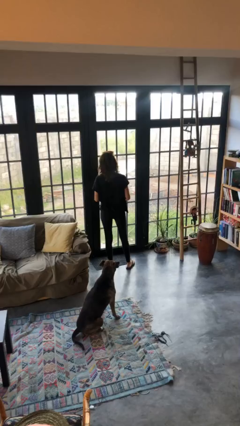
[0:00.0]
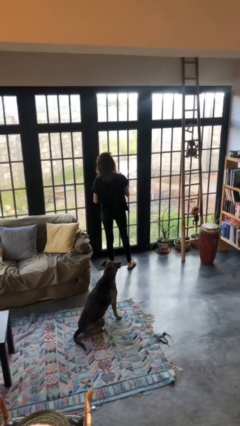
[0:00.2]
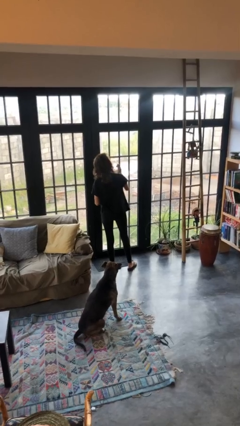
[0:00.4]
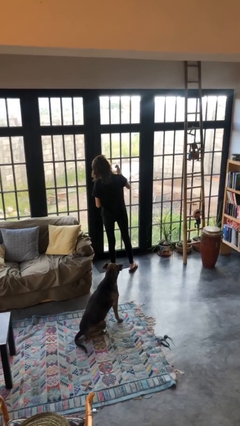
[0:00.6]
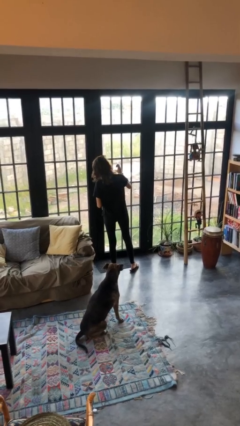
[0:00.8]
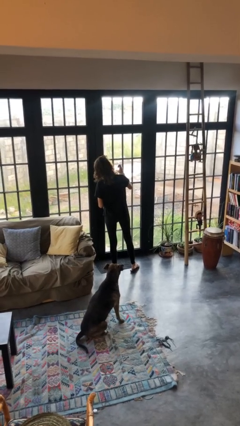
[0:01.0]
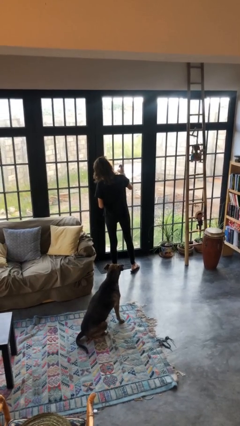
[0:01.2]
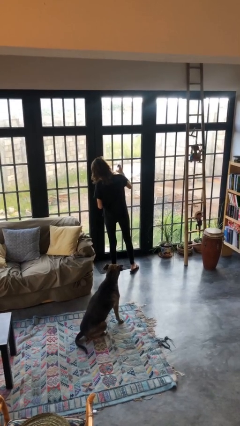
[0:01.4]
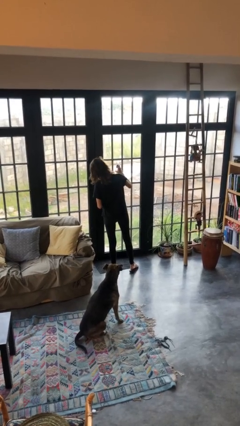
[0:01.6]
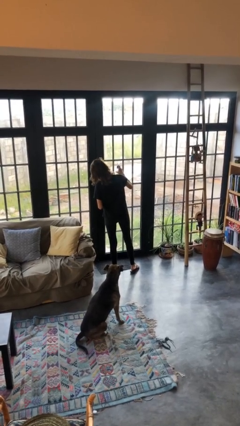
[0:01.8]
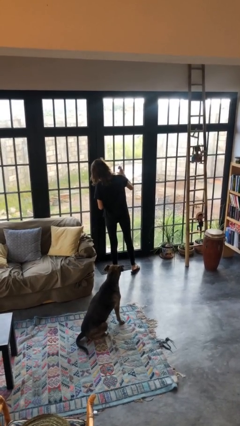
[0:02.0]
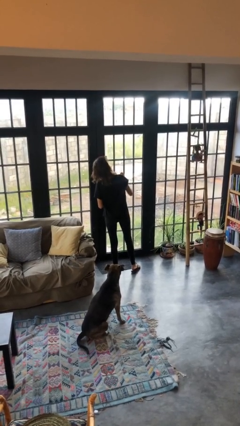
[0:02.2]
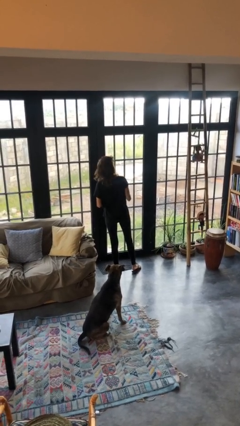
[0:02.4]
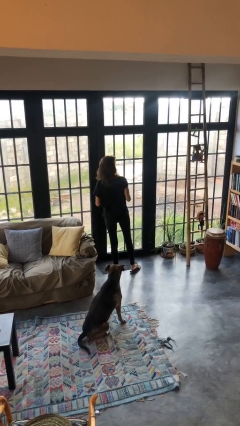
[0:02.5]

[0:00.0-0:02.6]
person sprays from bottle

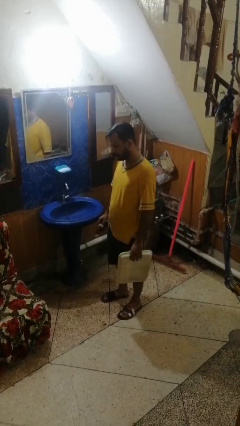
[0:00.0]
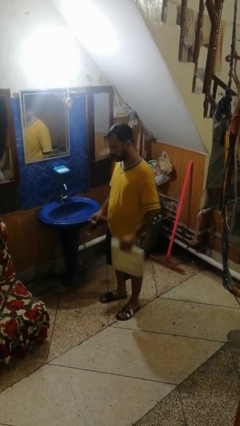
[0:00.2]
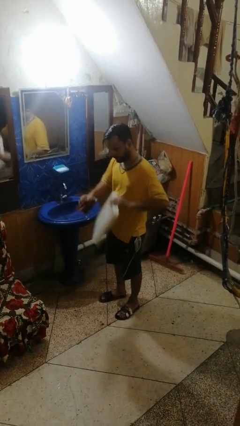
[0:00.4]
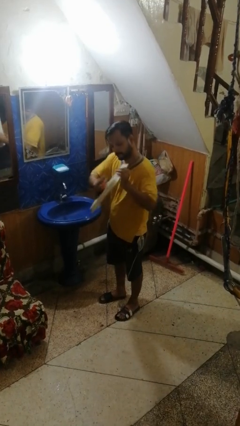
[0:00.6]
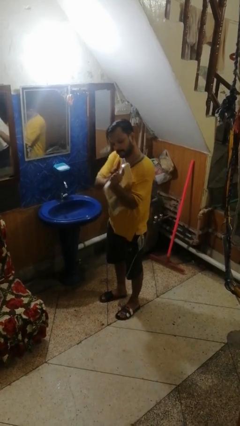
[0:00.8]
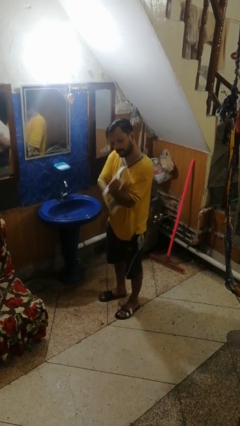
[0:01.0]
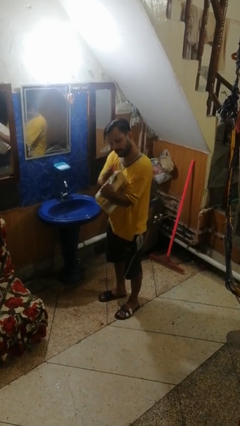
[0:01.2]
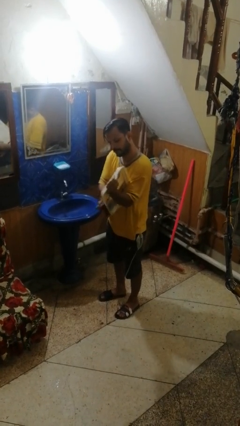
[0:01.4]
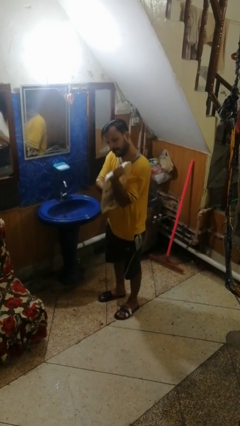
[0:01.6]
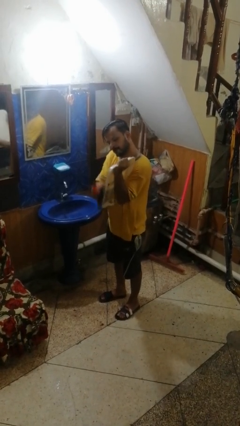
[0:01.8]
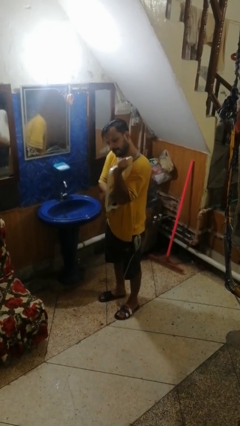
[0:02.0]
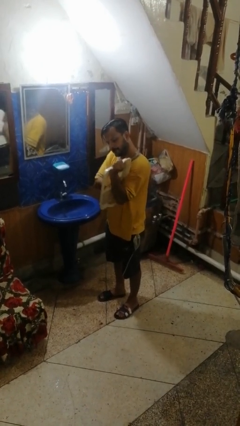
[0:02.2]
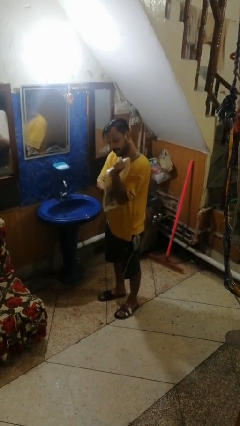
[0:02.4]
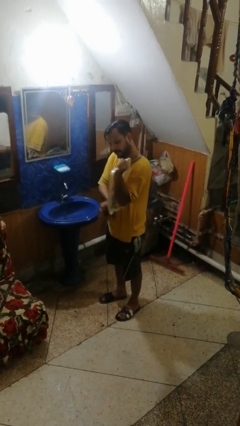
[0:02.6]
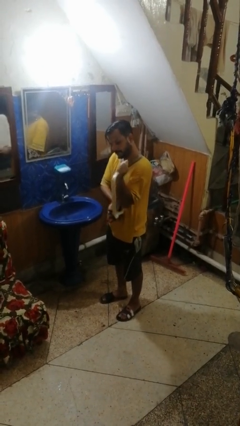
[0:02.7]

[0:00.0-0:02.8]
person dries dish

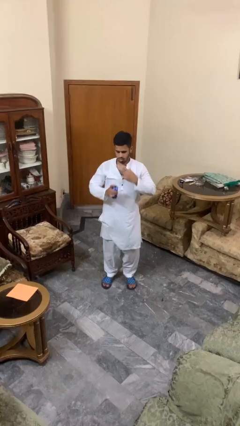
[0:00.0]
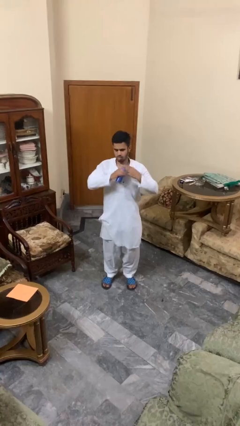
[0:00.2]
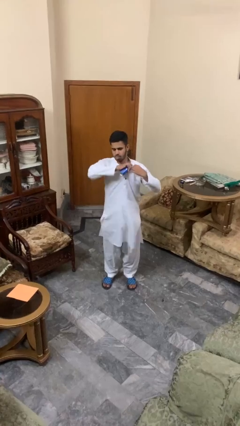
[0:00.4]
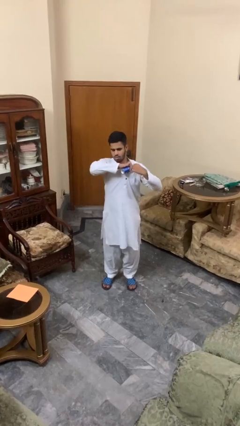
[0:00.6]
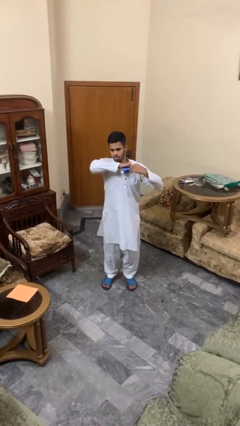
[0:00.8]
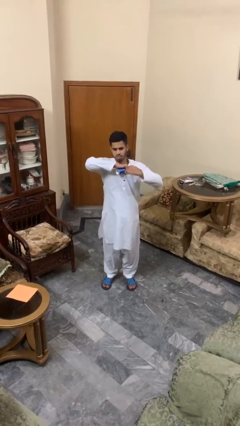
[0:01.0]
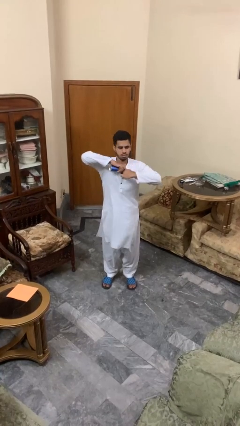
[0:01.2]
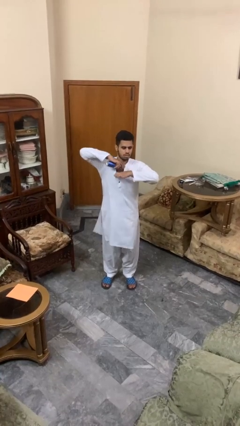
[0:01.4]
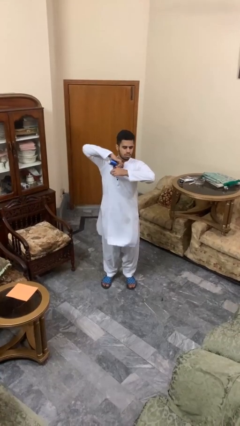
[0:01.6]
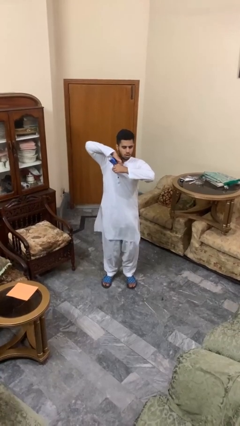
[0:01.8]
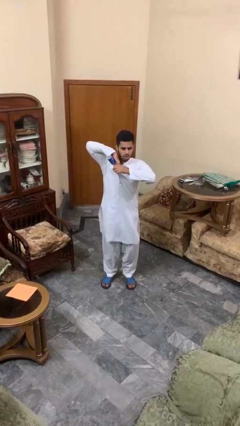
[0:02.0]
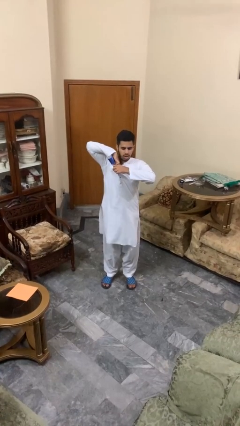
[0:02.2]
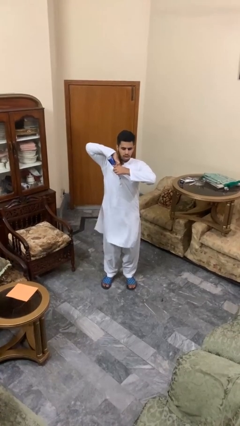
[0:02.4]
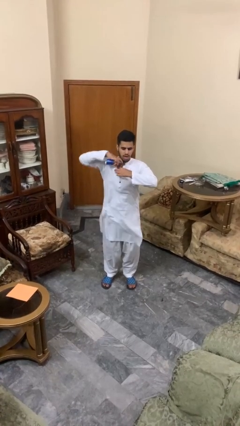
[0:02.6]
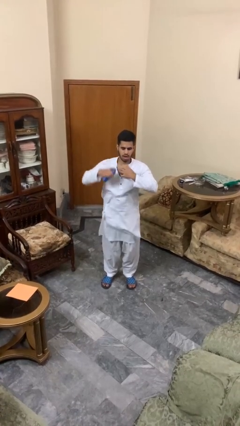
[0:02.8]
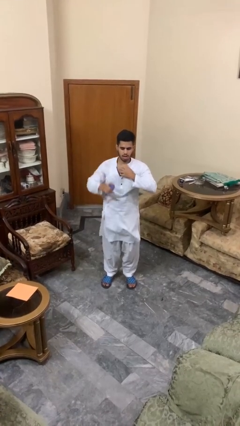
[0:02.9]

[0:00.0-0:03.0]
person applies deodorant

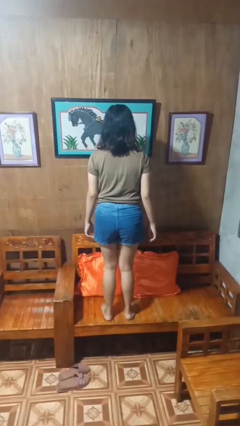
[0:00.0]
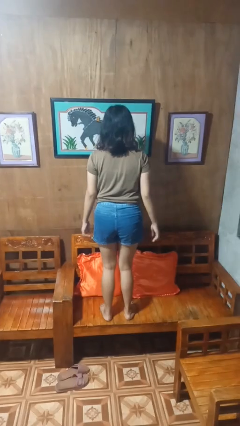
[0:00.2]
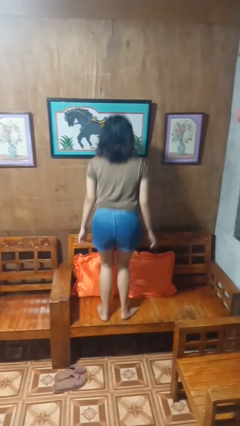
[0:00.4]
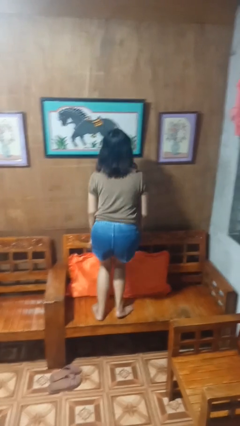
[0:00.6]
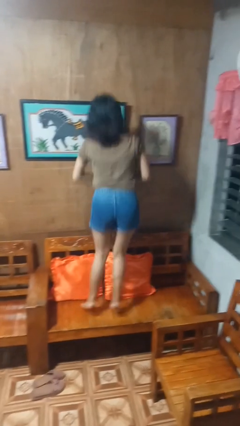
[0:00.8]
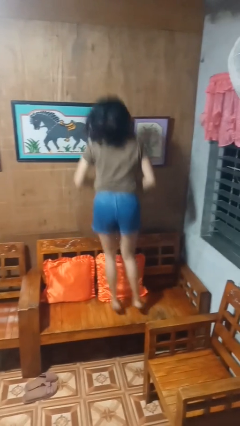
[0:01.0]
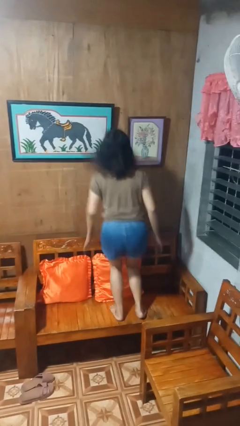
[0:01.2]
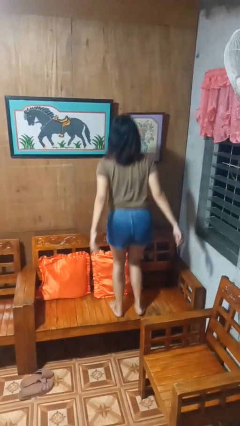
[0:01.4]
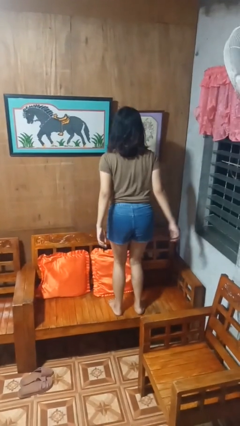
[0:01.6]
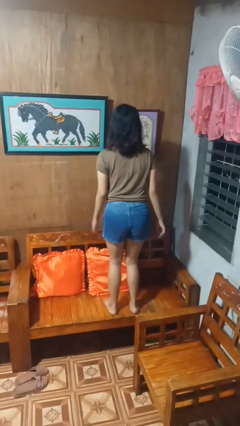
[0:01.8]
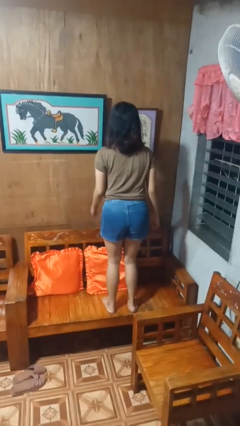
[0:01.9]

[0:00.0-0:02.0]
person jumps on couch

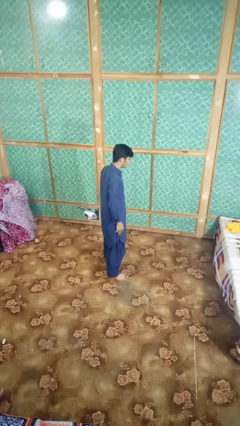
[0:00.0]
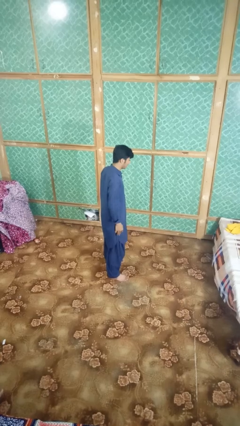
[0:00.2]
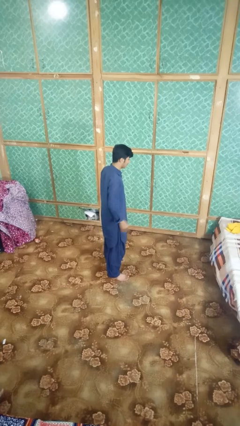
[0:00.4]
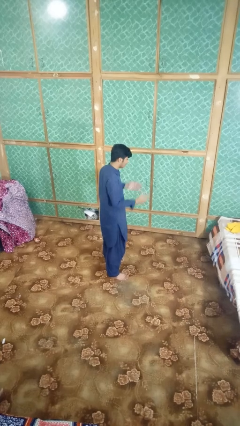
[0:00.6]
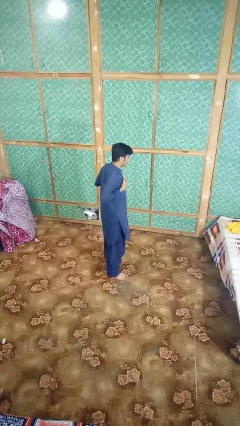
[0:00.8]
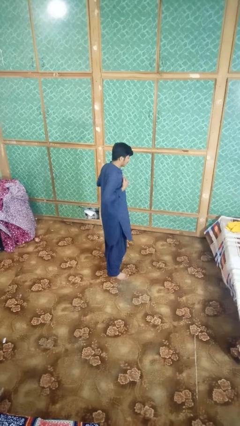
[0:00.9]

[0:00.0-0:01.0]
person drums on chest

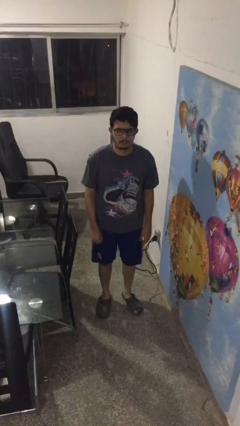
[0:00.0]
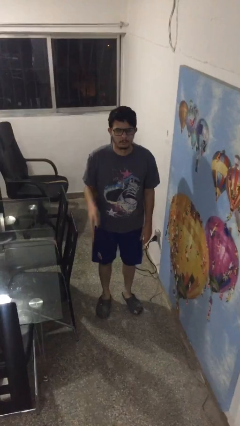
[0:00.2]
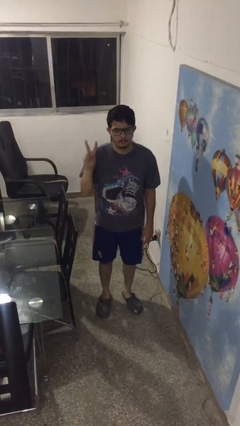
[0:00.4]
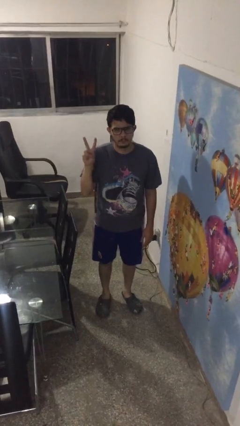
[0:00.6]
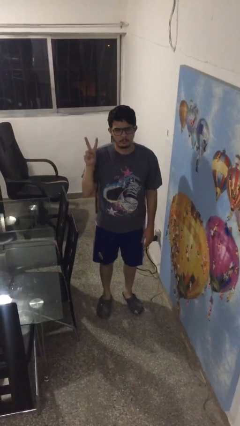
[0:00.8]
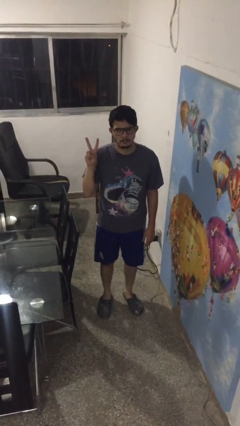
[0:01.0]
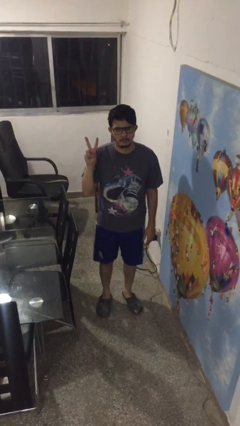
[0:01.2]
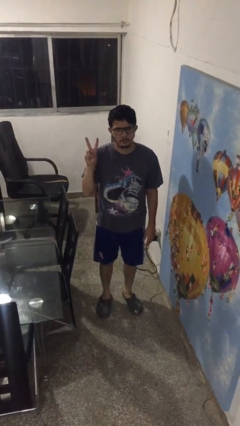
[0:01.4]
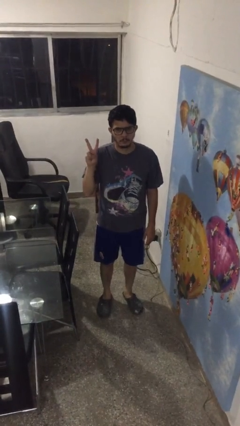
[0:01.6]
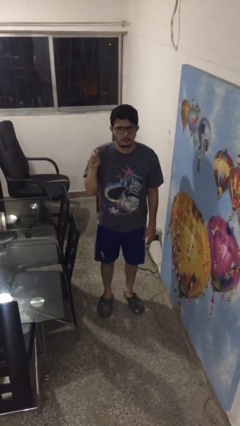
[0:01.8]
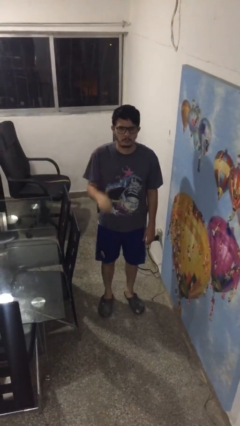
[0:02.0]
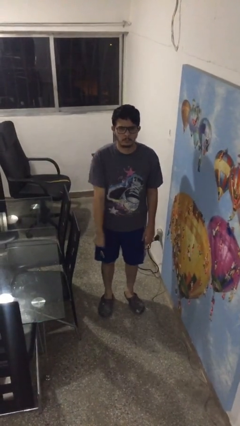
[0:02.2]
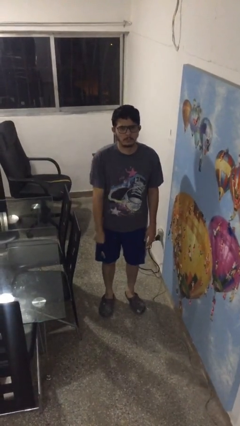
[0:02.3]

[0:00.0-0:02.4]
person gestures peace

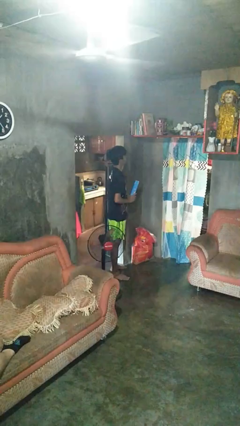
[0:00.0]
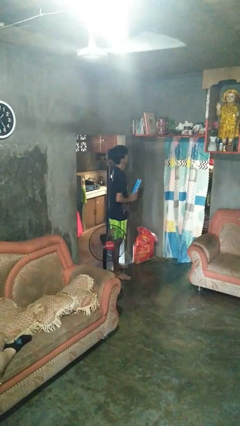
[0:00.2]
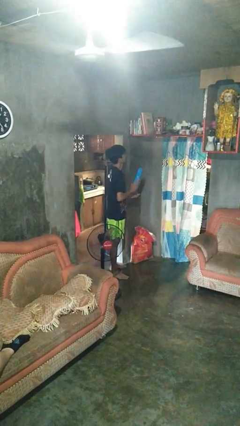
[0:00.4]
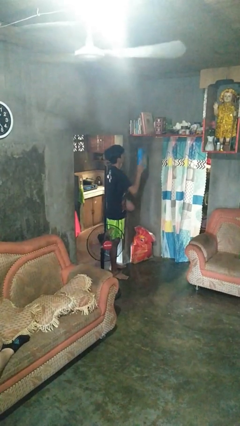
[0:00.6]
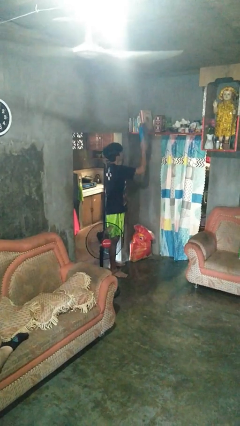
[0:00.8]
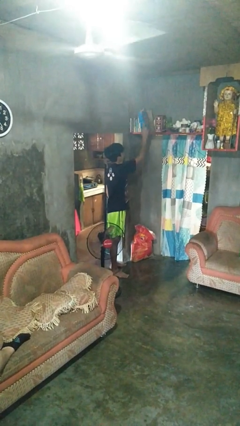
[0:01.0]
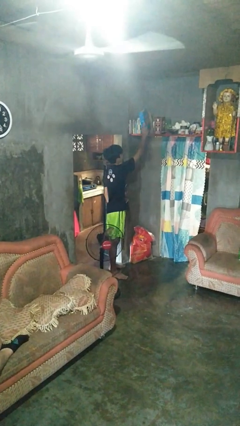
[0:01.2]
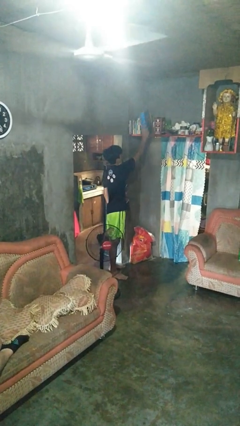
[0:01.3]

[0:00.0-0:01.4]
person puts down object on shelf

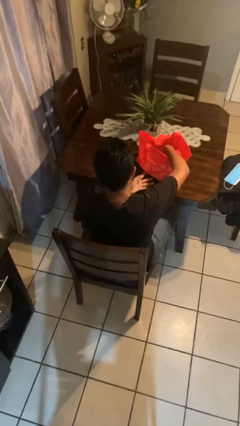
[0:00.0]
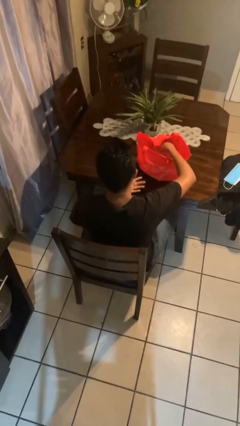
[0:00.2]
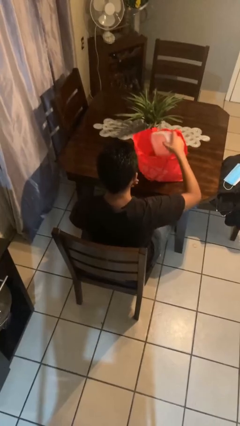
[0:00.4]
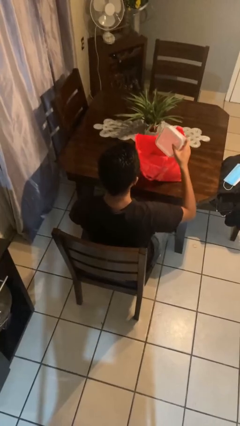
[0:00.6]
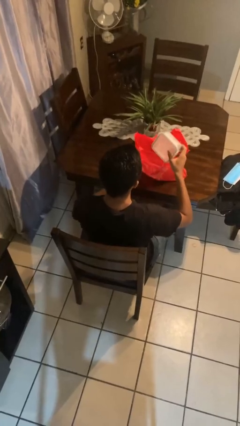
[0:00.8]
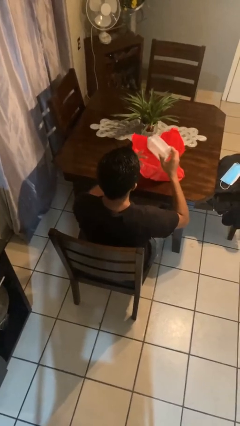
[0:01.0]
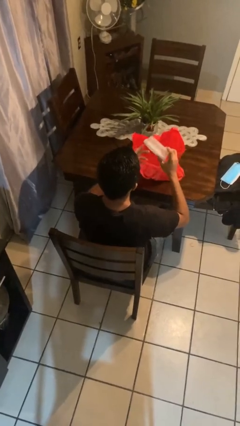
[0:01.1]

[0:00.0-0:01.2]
person takes object from bag

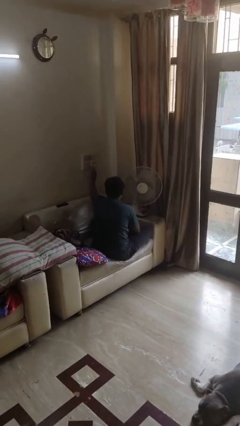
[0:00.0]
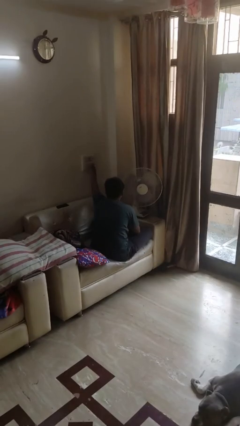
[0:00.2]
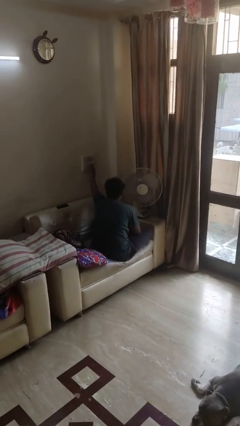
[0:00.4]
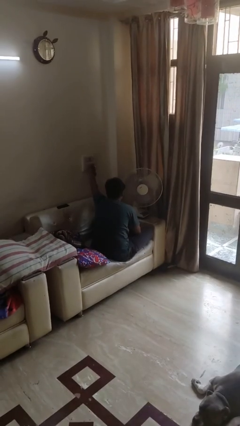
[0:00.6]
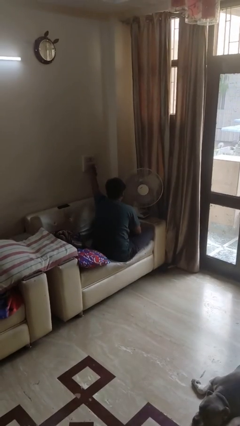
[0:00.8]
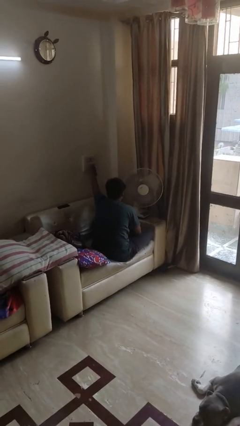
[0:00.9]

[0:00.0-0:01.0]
person turns off fan
